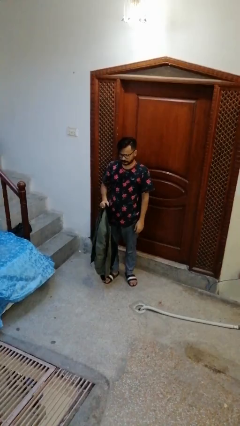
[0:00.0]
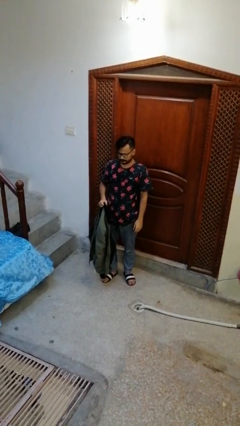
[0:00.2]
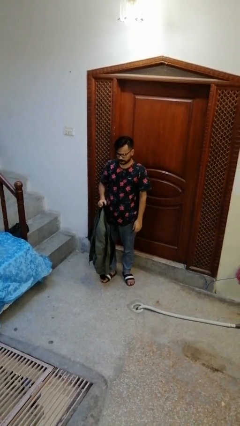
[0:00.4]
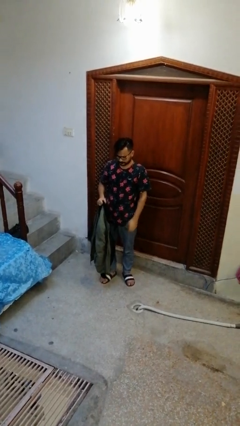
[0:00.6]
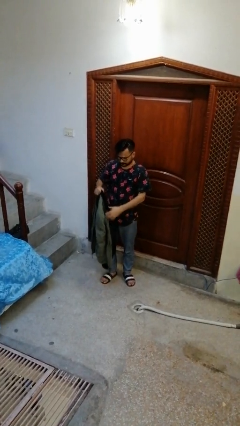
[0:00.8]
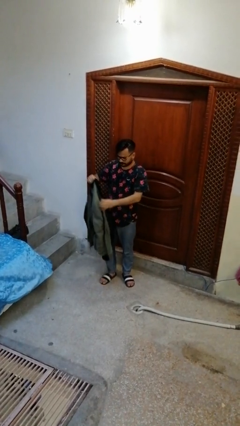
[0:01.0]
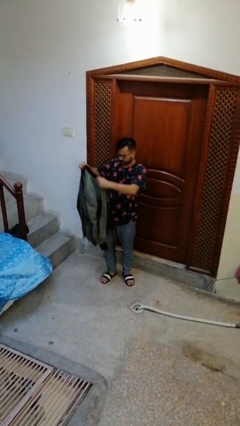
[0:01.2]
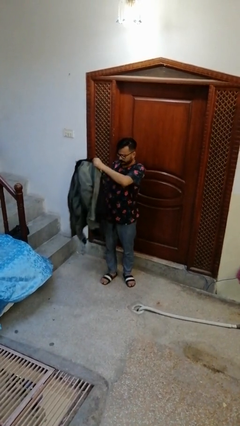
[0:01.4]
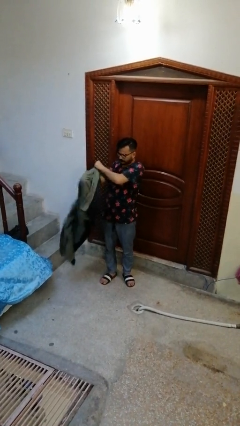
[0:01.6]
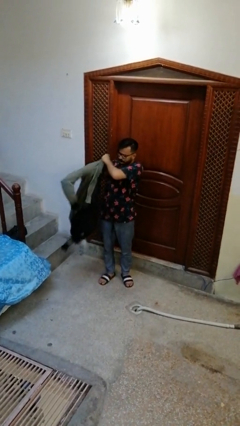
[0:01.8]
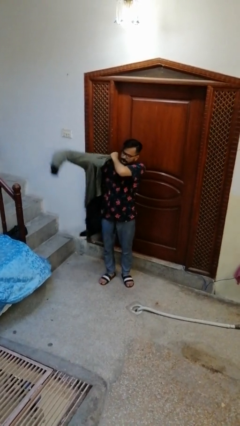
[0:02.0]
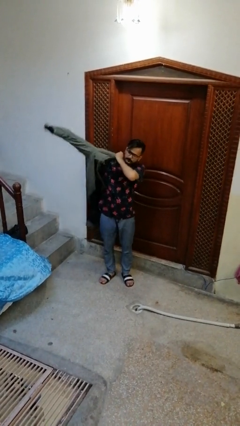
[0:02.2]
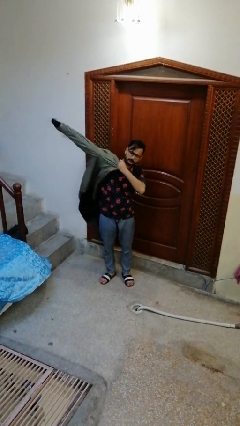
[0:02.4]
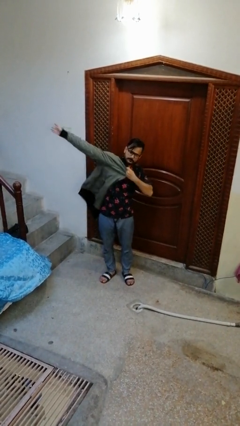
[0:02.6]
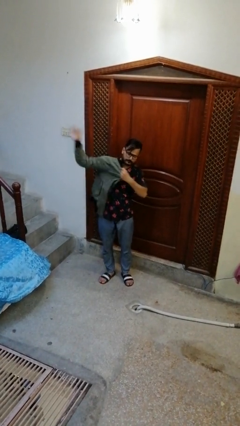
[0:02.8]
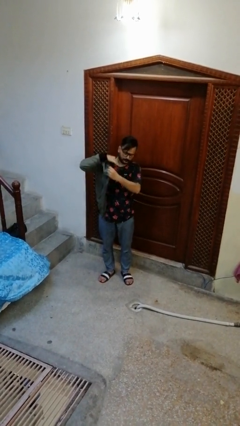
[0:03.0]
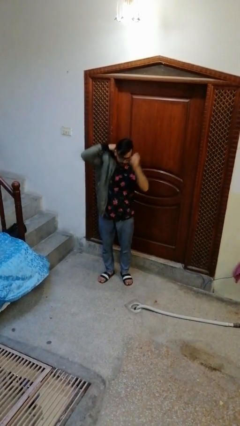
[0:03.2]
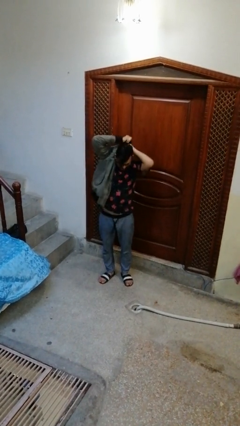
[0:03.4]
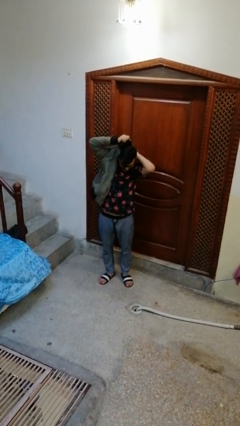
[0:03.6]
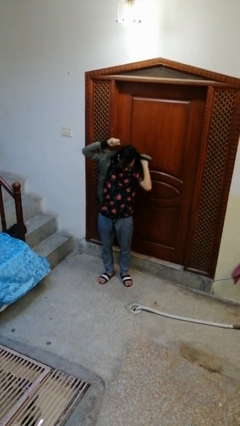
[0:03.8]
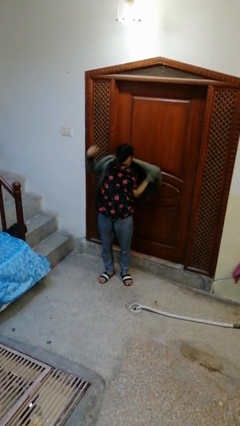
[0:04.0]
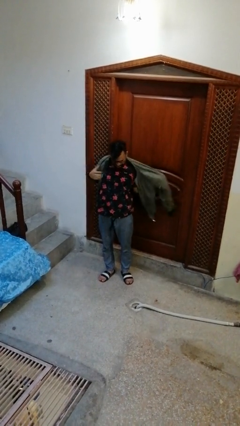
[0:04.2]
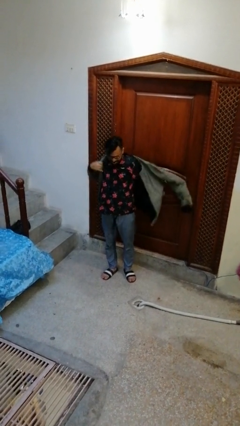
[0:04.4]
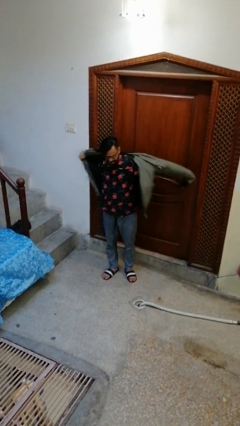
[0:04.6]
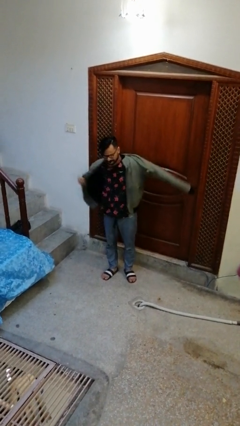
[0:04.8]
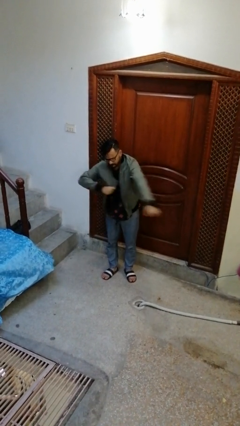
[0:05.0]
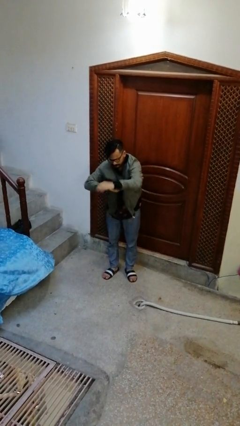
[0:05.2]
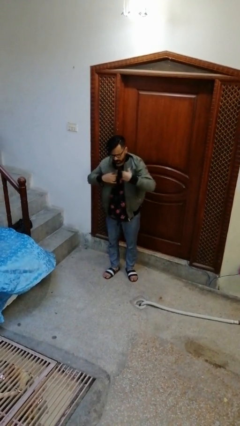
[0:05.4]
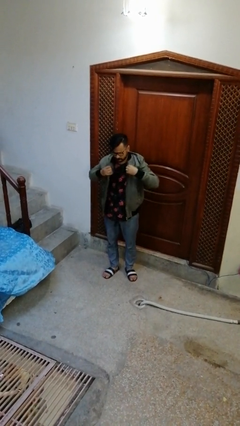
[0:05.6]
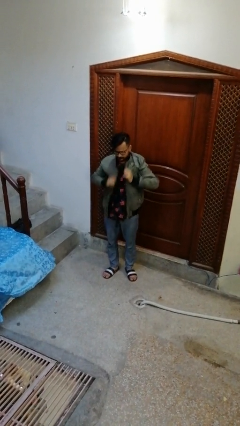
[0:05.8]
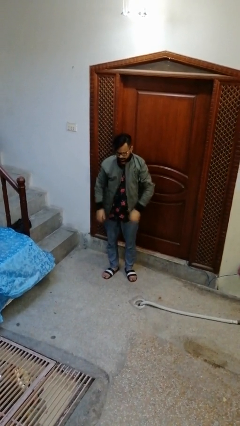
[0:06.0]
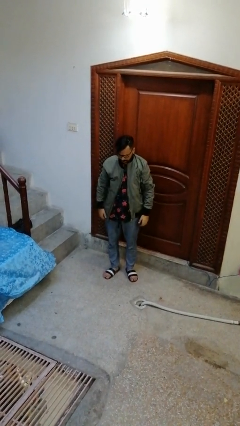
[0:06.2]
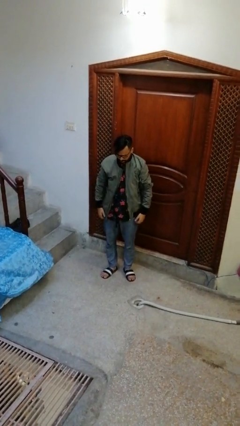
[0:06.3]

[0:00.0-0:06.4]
person puts on jacket

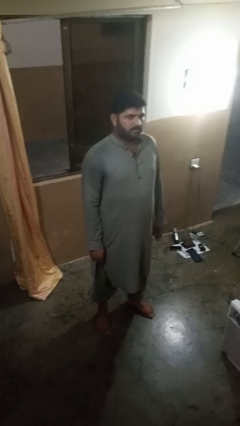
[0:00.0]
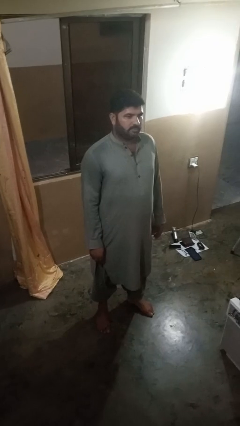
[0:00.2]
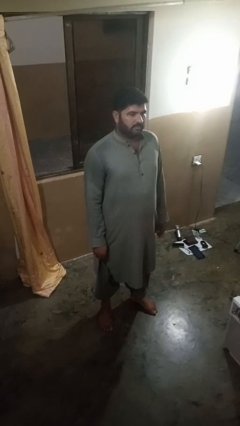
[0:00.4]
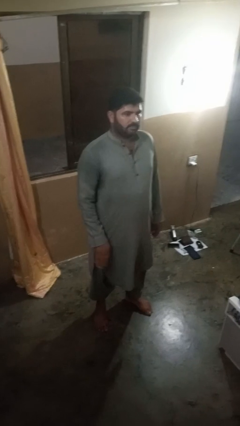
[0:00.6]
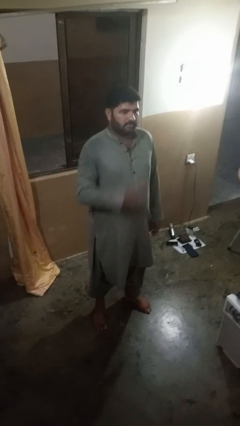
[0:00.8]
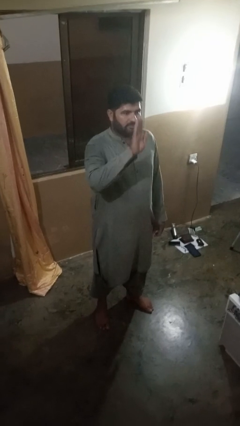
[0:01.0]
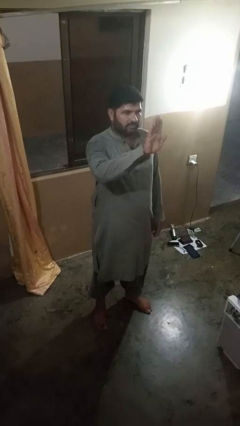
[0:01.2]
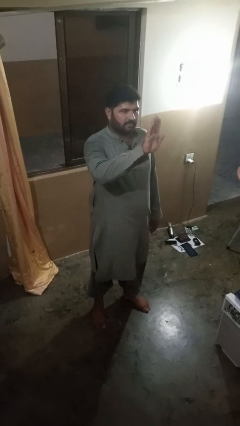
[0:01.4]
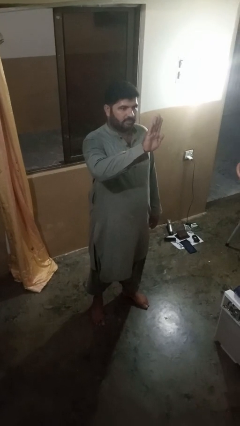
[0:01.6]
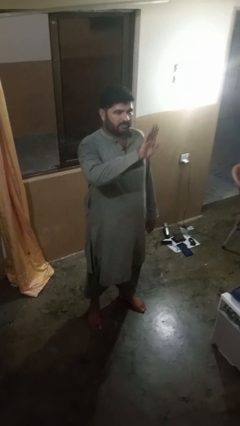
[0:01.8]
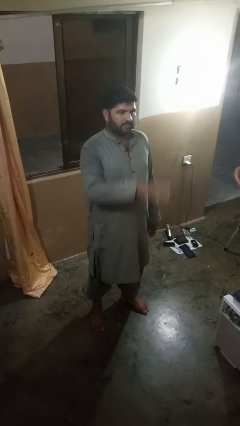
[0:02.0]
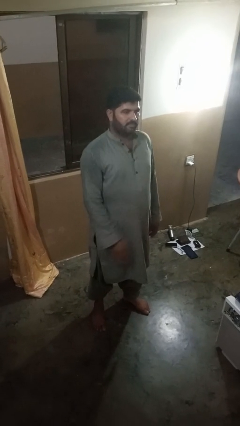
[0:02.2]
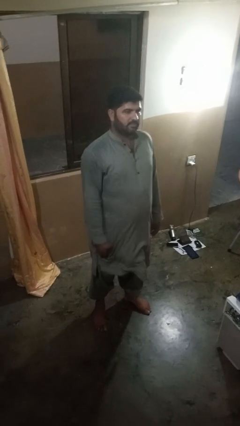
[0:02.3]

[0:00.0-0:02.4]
person gestures stop

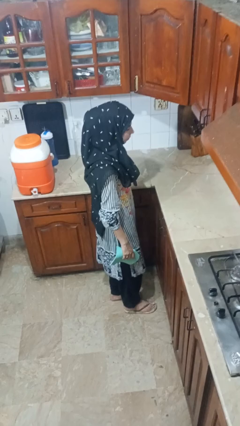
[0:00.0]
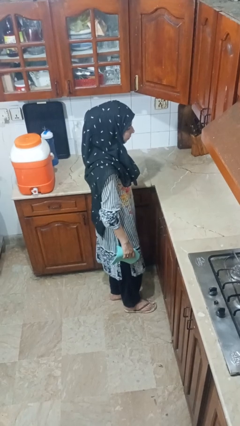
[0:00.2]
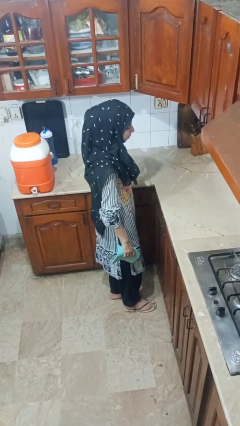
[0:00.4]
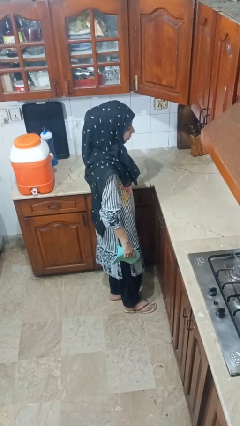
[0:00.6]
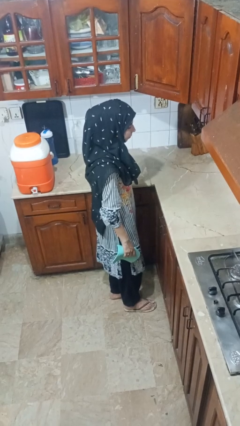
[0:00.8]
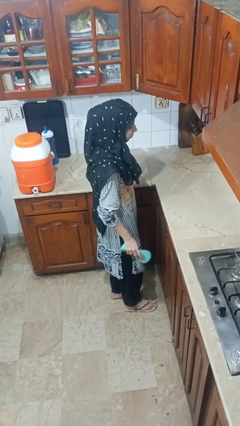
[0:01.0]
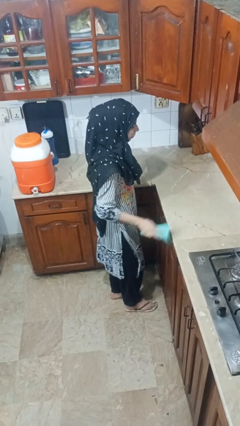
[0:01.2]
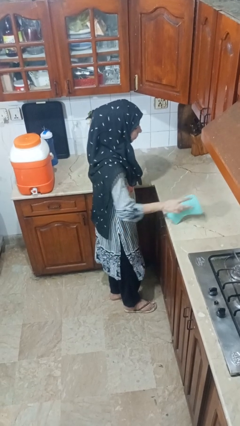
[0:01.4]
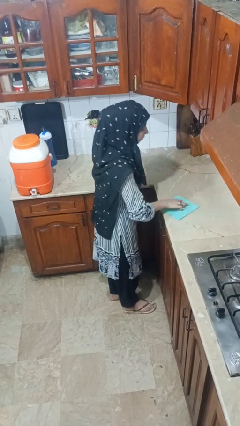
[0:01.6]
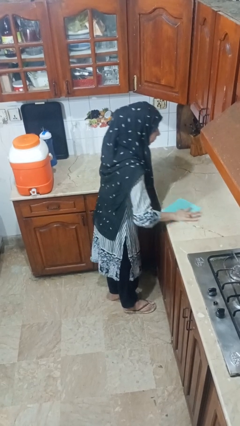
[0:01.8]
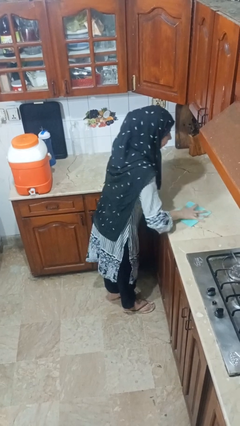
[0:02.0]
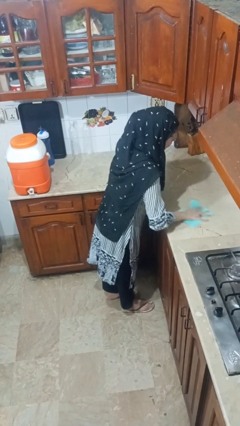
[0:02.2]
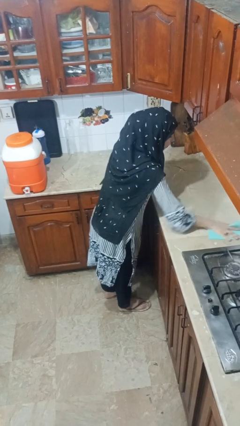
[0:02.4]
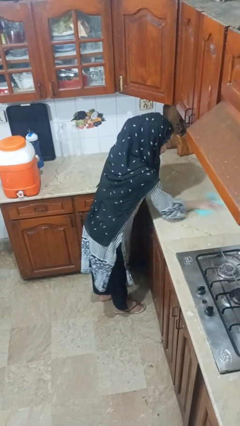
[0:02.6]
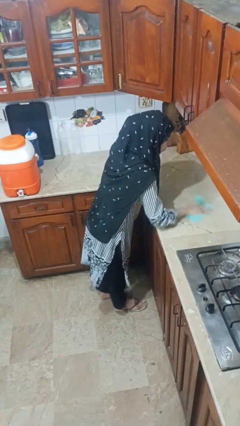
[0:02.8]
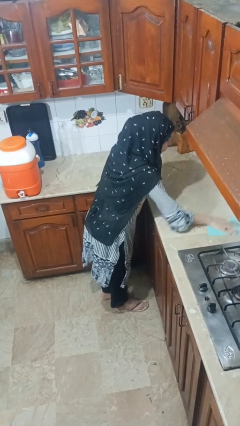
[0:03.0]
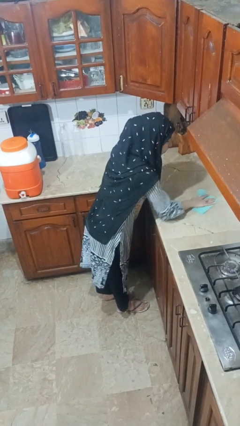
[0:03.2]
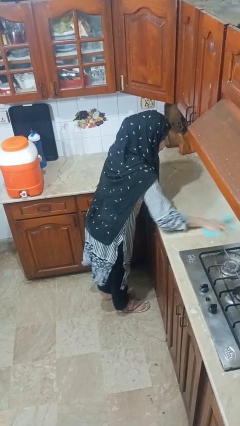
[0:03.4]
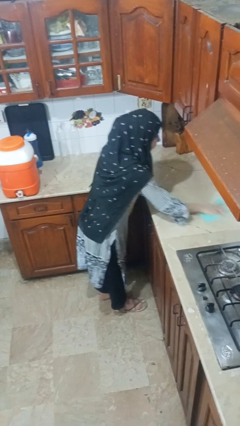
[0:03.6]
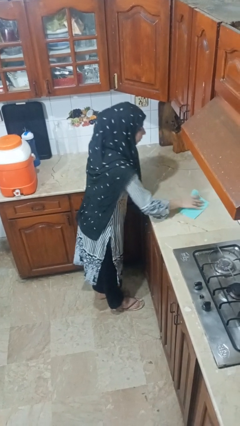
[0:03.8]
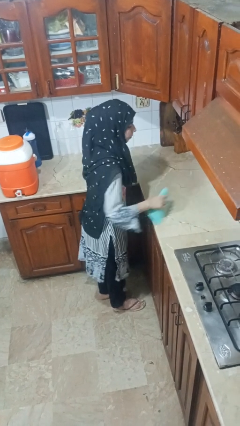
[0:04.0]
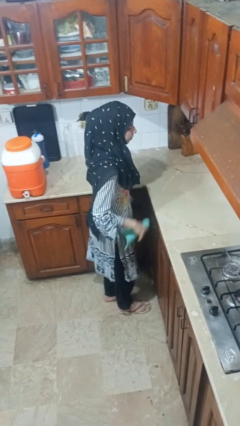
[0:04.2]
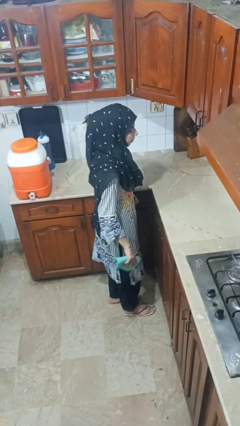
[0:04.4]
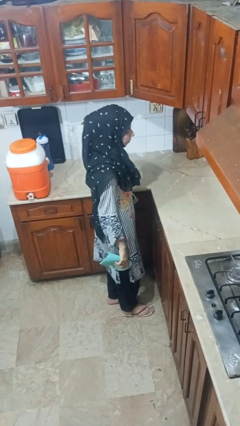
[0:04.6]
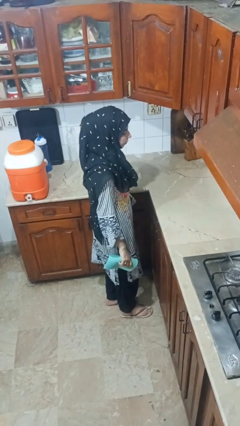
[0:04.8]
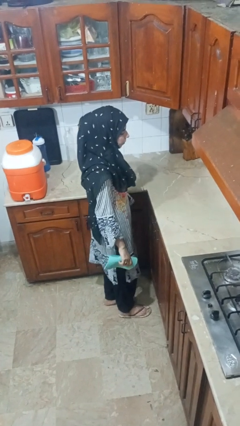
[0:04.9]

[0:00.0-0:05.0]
person cleans table with rag

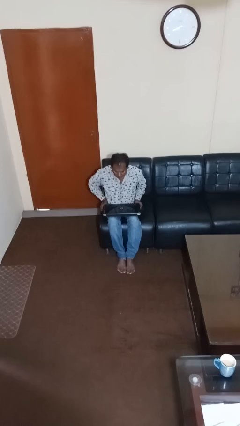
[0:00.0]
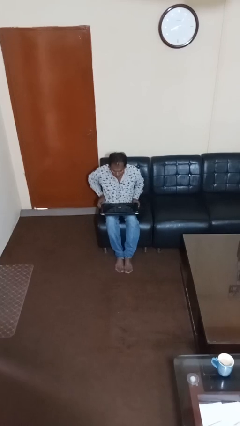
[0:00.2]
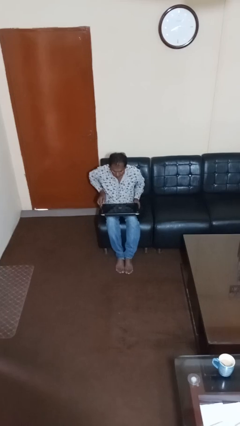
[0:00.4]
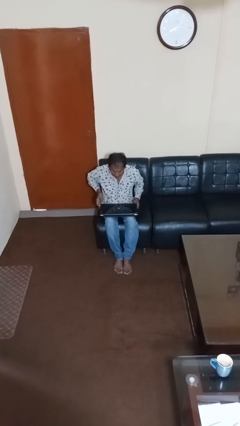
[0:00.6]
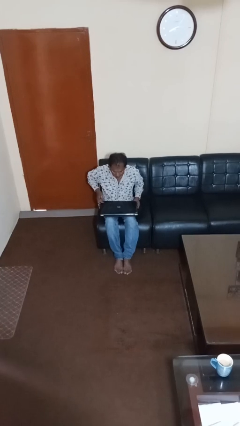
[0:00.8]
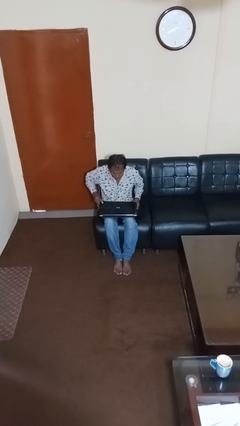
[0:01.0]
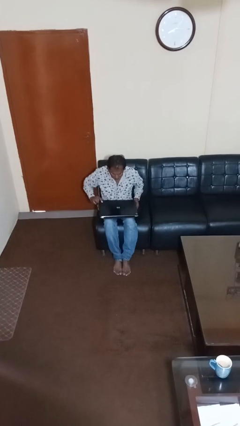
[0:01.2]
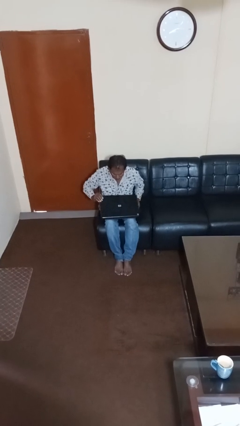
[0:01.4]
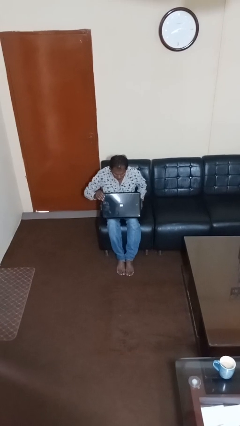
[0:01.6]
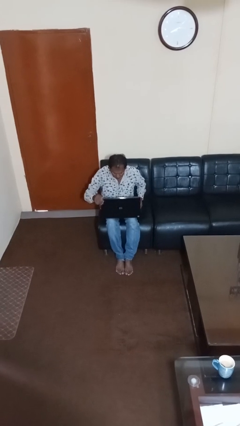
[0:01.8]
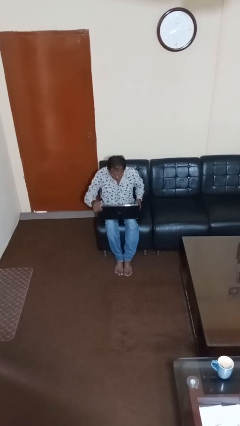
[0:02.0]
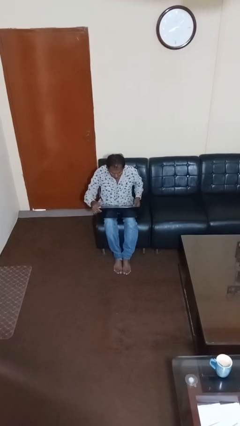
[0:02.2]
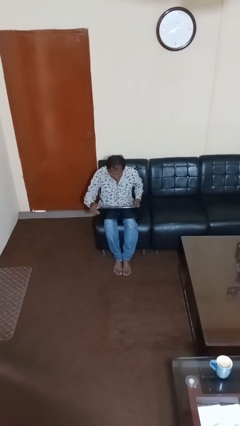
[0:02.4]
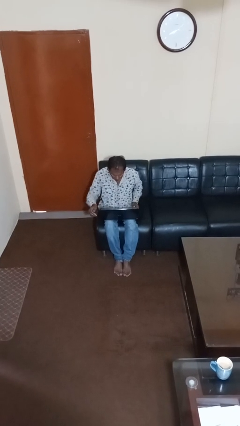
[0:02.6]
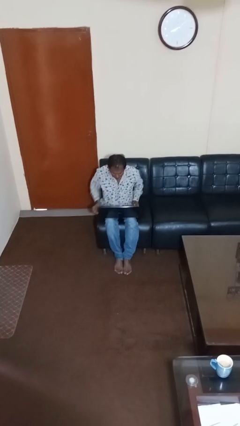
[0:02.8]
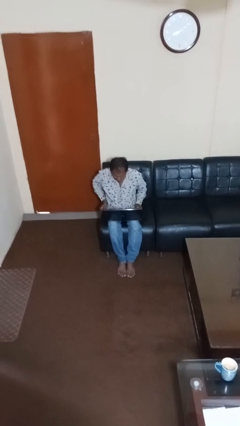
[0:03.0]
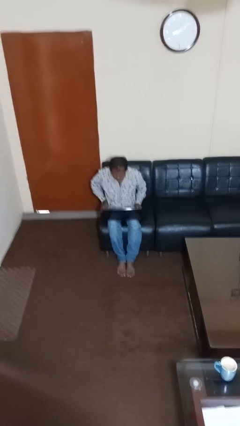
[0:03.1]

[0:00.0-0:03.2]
person opens laptop

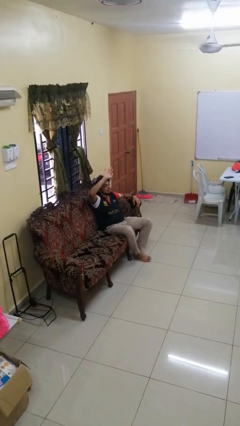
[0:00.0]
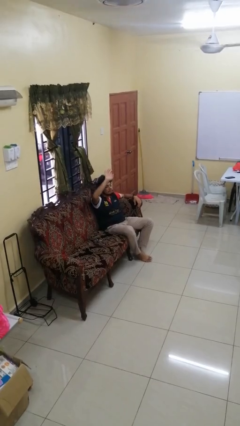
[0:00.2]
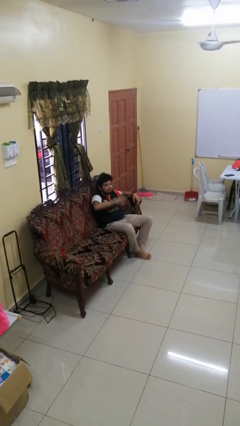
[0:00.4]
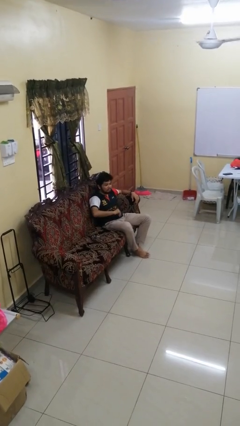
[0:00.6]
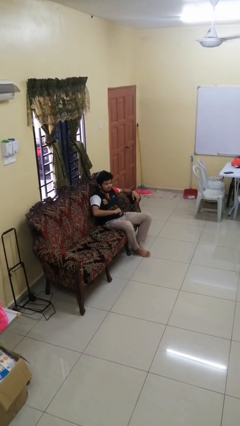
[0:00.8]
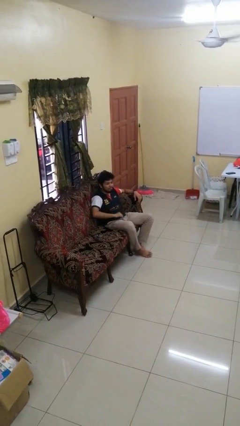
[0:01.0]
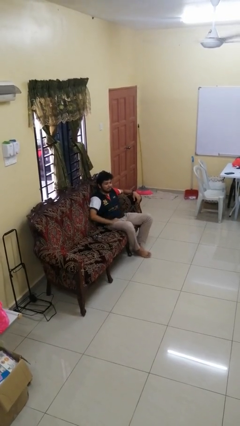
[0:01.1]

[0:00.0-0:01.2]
person gestures swipe down
